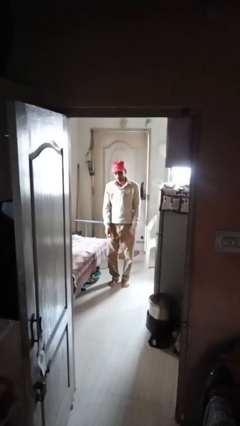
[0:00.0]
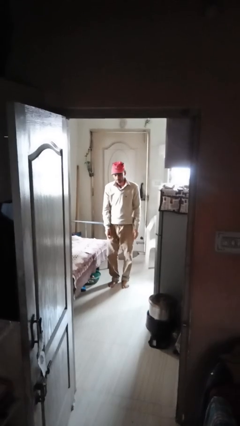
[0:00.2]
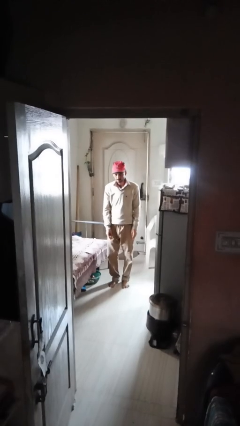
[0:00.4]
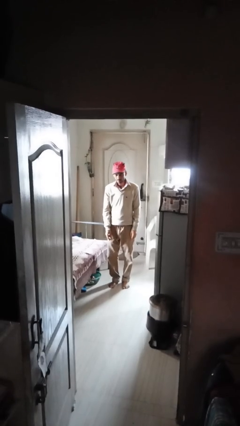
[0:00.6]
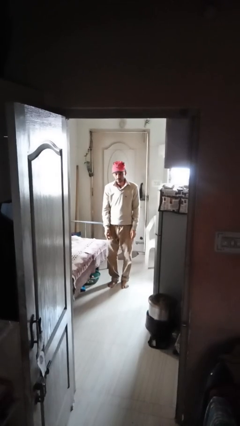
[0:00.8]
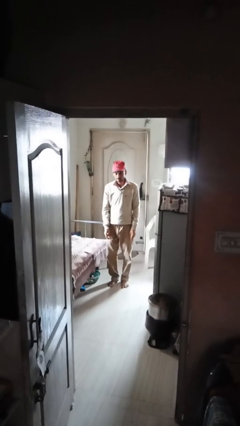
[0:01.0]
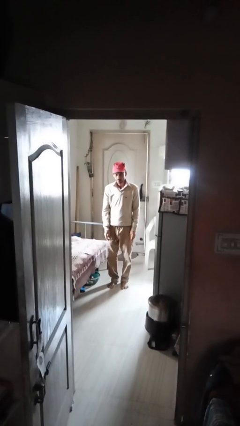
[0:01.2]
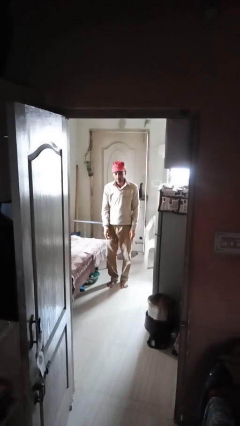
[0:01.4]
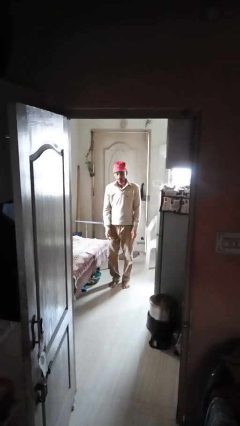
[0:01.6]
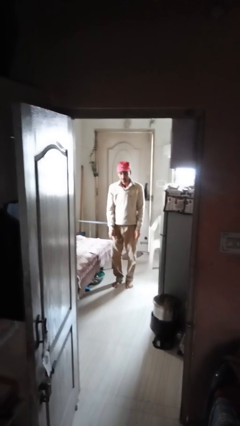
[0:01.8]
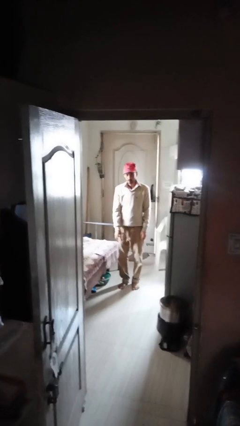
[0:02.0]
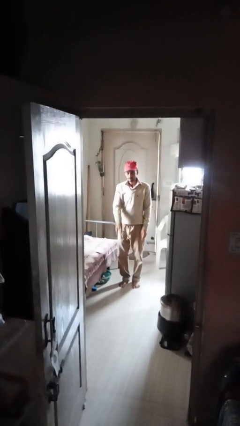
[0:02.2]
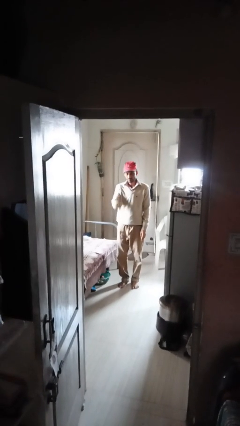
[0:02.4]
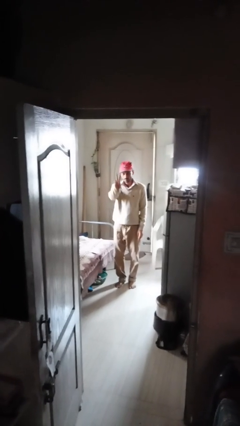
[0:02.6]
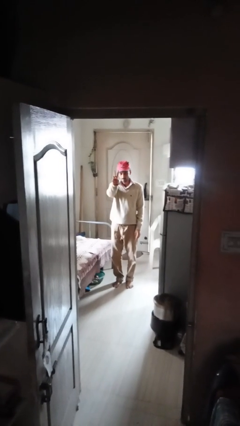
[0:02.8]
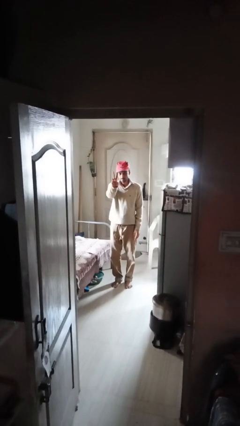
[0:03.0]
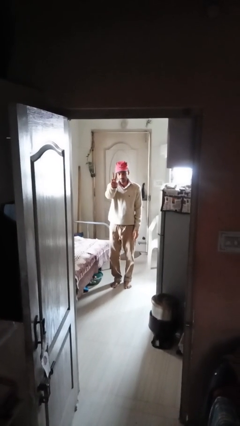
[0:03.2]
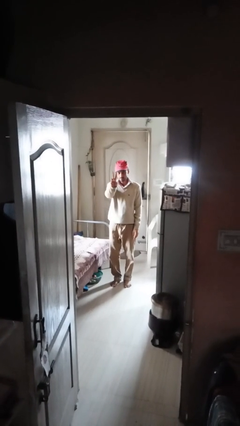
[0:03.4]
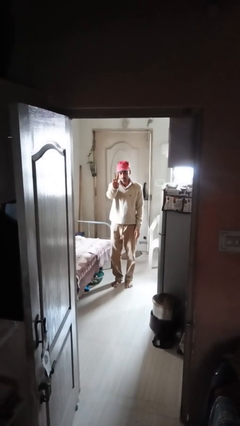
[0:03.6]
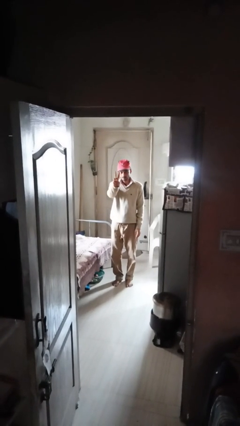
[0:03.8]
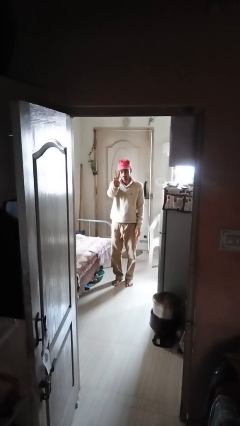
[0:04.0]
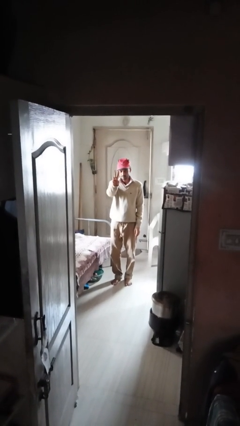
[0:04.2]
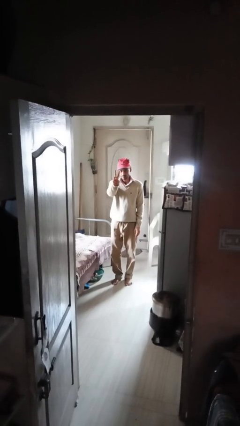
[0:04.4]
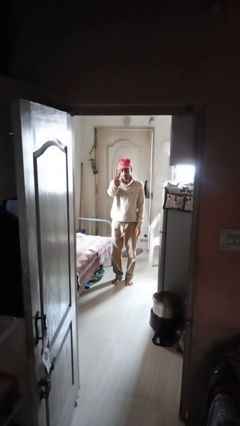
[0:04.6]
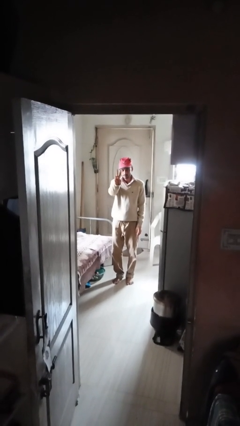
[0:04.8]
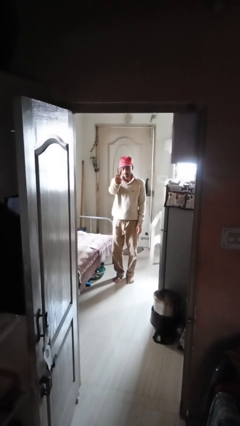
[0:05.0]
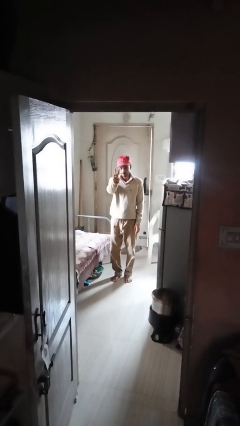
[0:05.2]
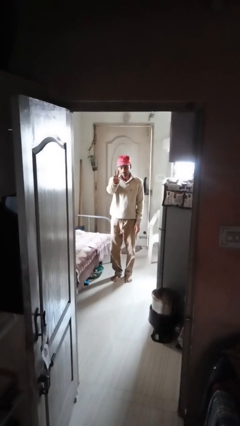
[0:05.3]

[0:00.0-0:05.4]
person gestures peace

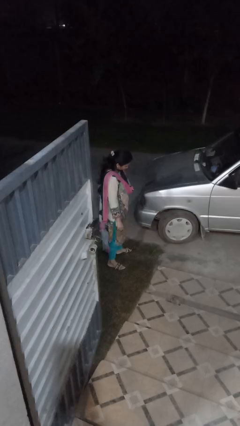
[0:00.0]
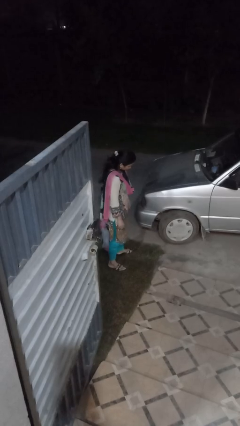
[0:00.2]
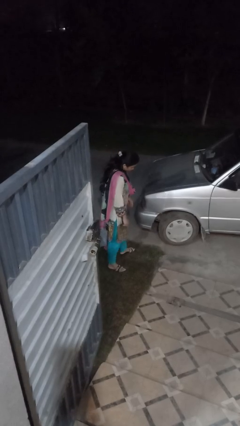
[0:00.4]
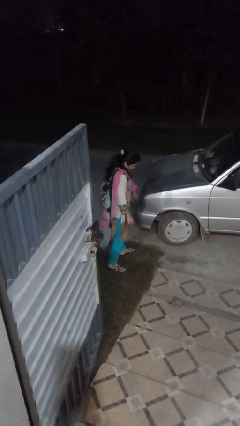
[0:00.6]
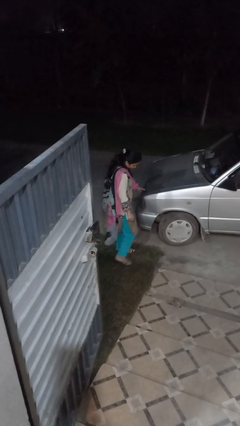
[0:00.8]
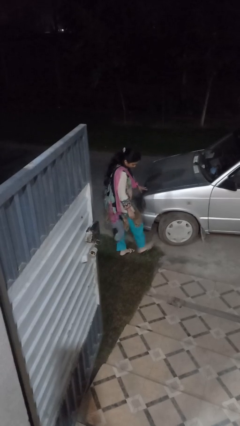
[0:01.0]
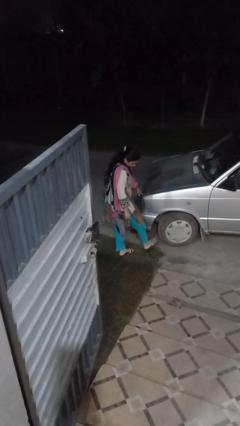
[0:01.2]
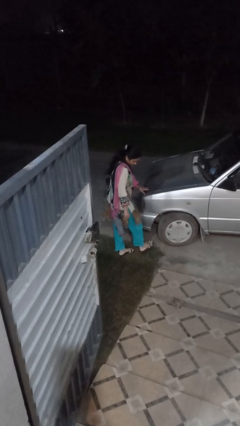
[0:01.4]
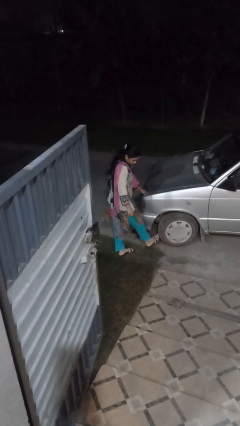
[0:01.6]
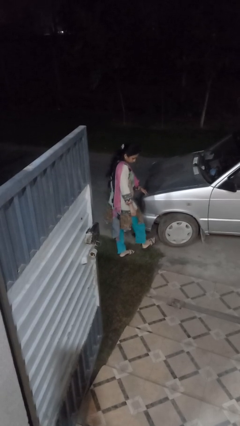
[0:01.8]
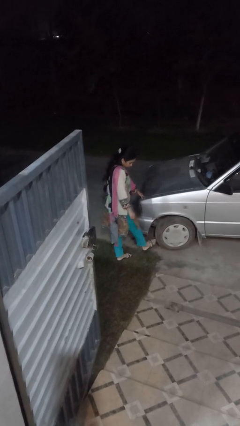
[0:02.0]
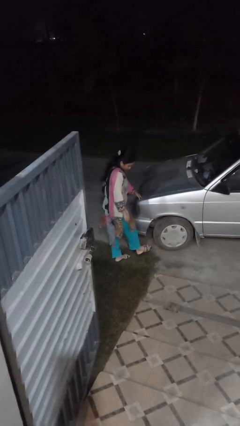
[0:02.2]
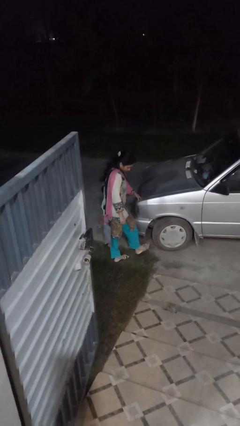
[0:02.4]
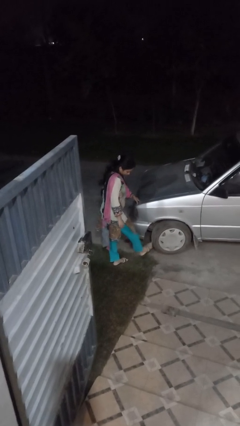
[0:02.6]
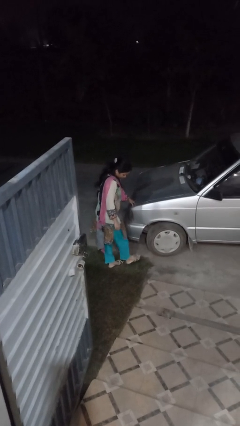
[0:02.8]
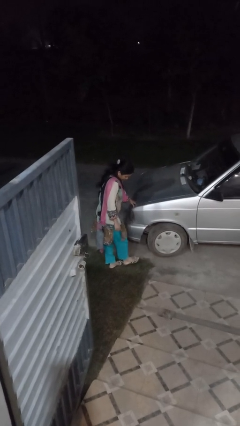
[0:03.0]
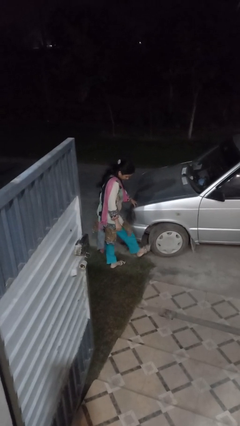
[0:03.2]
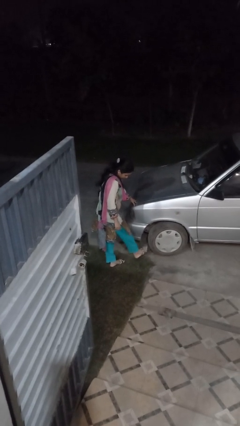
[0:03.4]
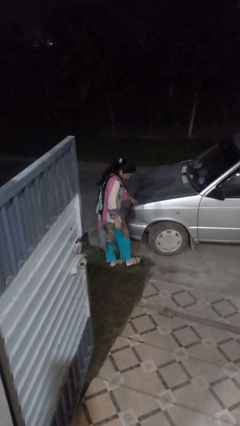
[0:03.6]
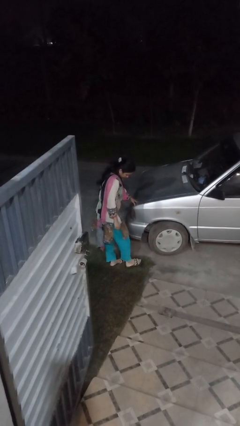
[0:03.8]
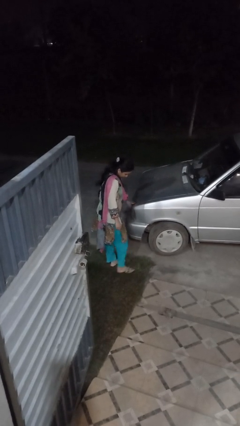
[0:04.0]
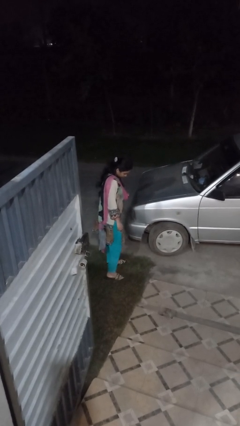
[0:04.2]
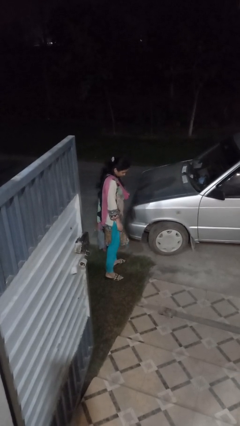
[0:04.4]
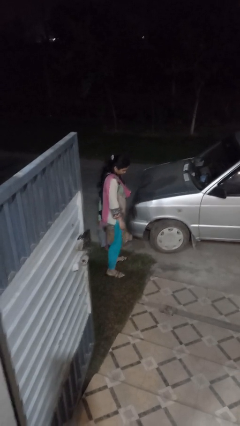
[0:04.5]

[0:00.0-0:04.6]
person kicks car tires

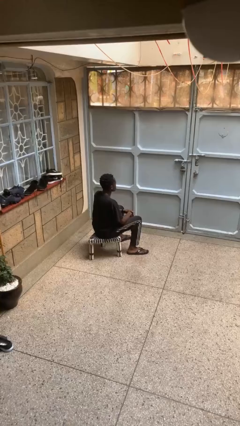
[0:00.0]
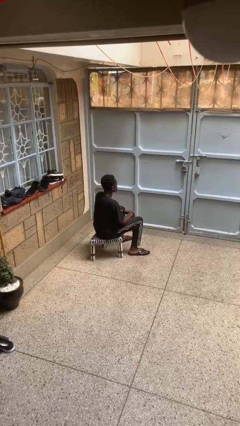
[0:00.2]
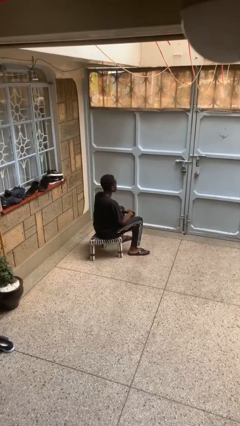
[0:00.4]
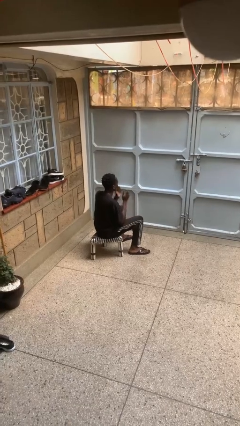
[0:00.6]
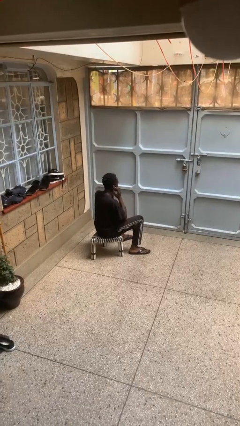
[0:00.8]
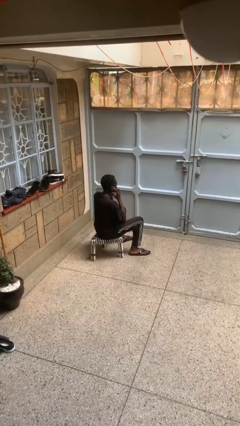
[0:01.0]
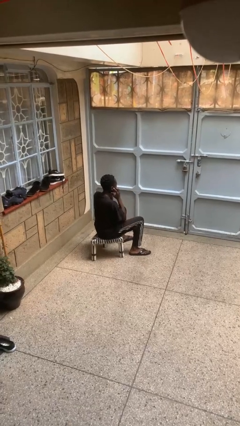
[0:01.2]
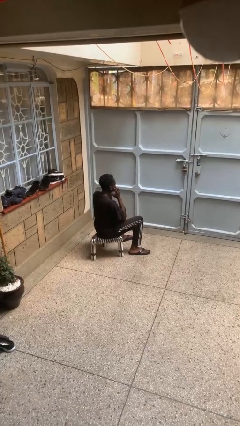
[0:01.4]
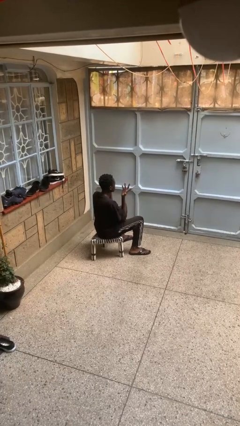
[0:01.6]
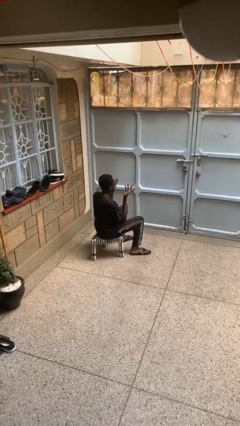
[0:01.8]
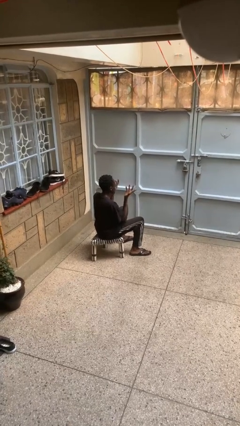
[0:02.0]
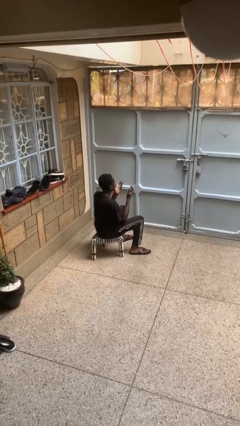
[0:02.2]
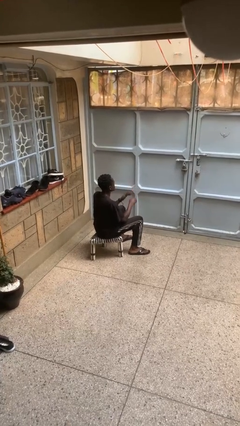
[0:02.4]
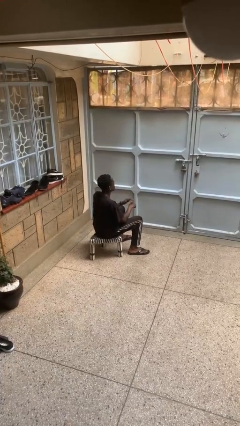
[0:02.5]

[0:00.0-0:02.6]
person puts fingers in ear

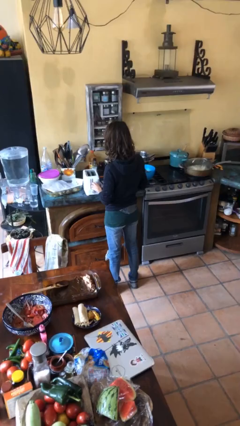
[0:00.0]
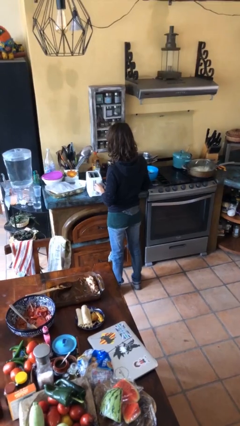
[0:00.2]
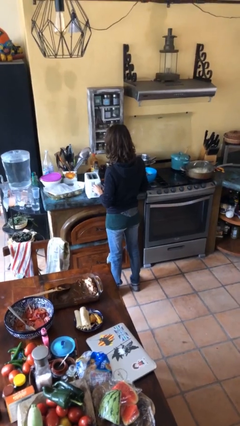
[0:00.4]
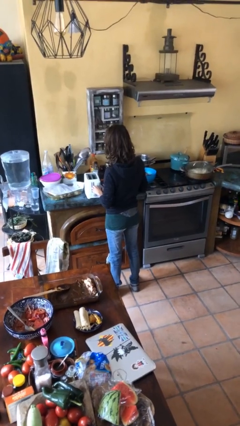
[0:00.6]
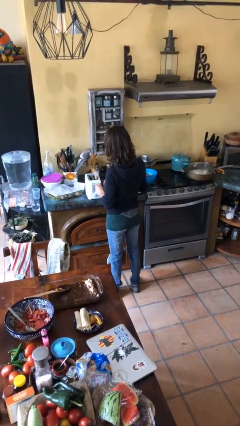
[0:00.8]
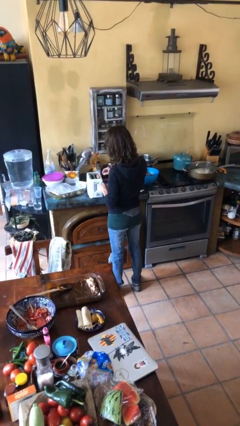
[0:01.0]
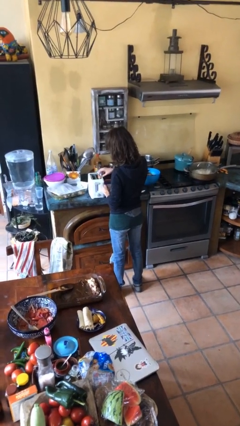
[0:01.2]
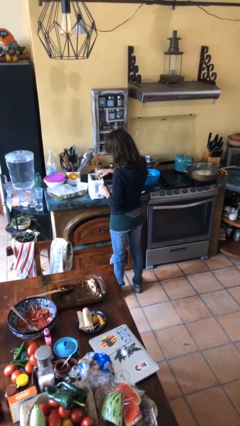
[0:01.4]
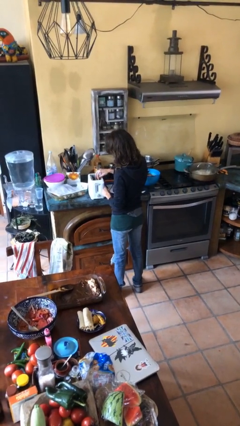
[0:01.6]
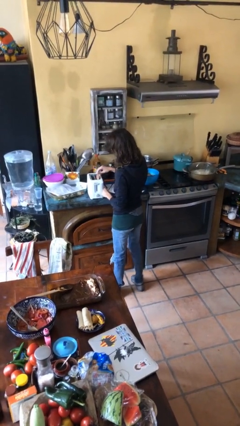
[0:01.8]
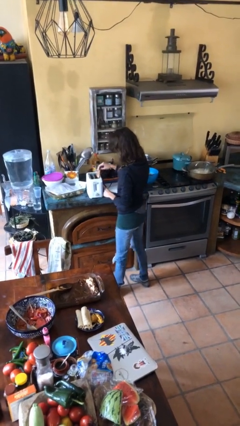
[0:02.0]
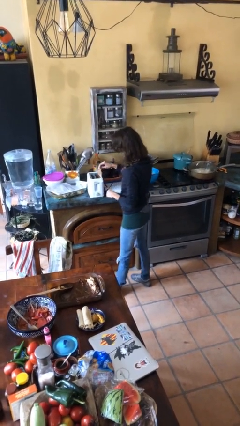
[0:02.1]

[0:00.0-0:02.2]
person takes object from toaster

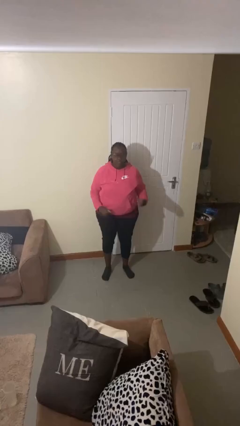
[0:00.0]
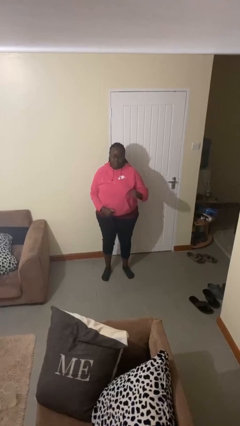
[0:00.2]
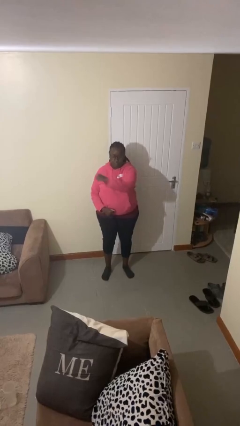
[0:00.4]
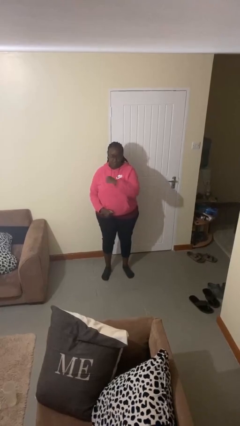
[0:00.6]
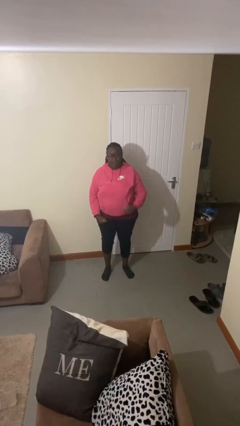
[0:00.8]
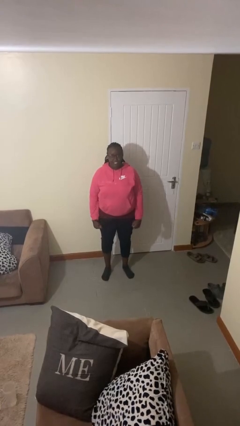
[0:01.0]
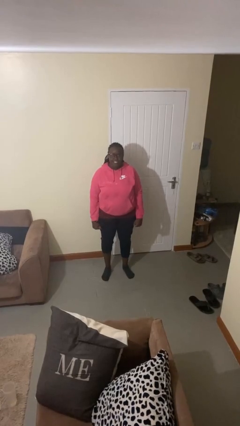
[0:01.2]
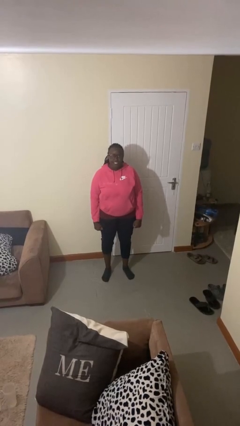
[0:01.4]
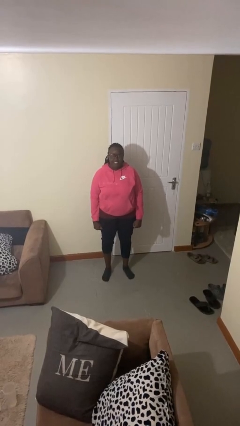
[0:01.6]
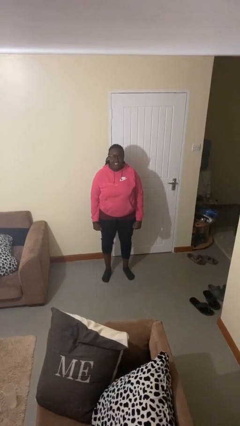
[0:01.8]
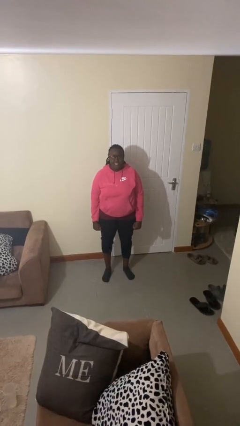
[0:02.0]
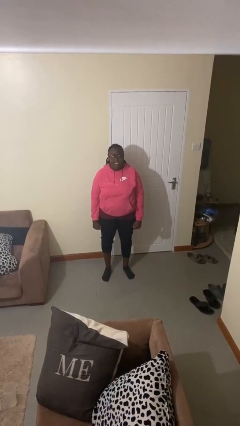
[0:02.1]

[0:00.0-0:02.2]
person punches

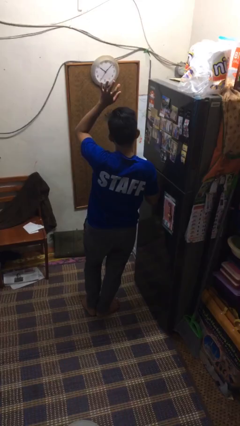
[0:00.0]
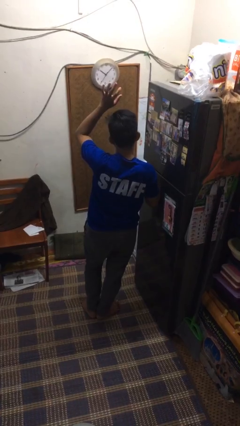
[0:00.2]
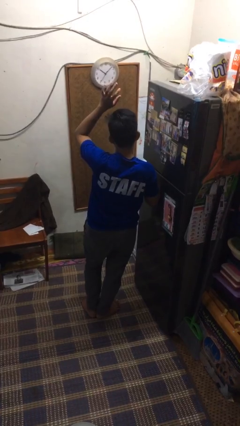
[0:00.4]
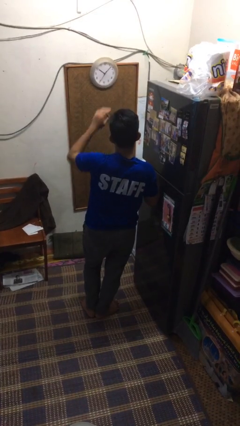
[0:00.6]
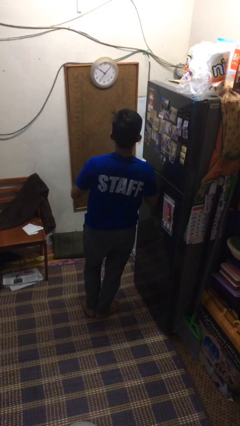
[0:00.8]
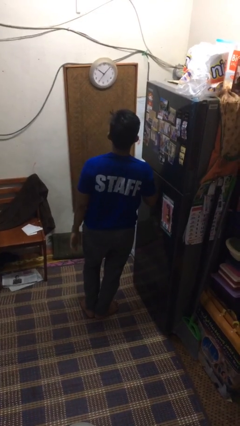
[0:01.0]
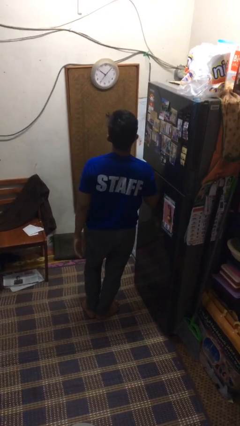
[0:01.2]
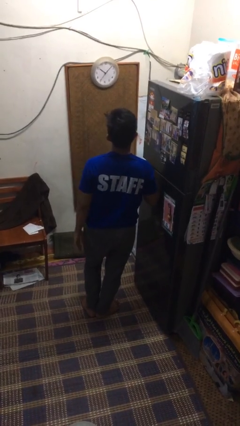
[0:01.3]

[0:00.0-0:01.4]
person gestures lower hand
